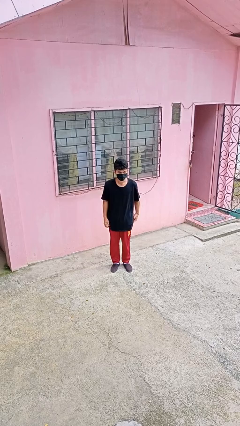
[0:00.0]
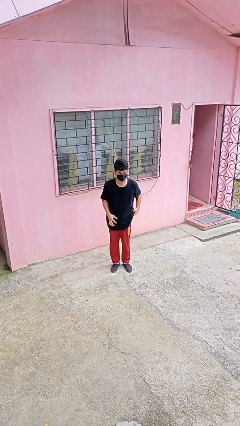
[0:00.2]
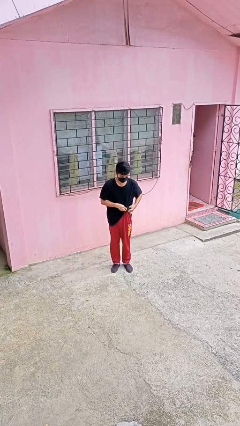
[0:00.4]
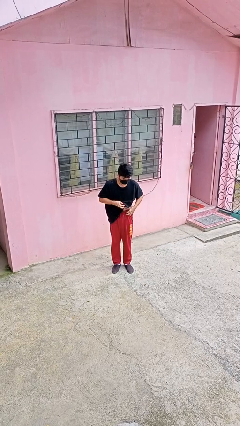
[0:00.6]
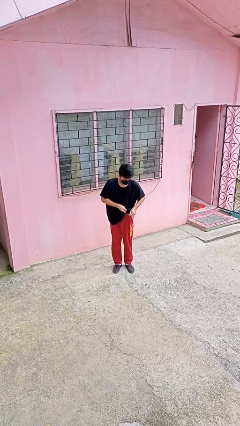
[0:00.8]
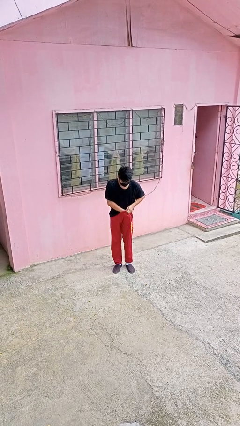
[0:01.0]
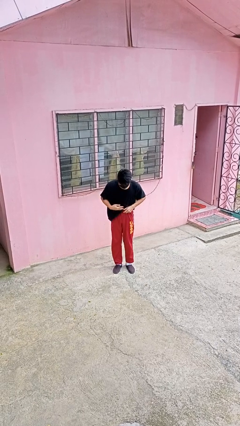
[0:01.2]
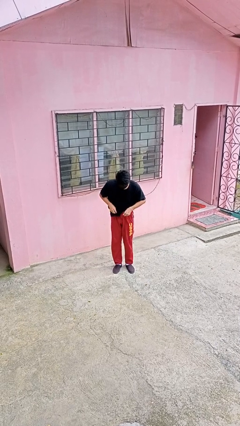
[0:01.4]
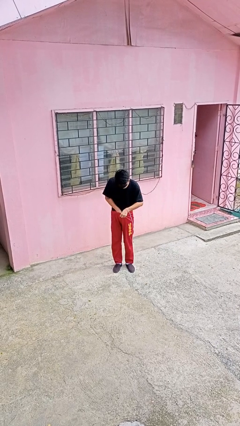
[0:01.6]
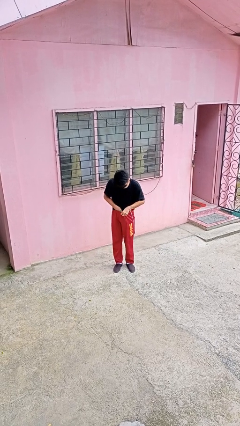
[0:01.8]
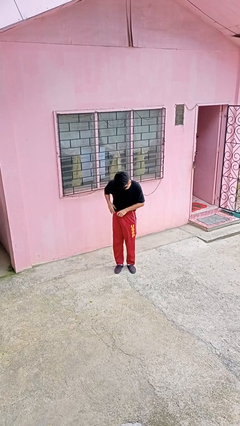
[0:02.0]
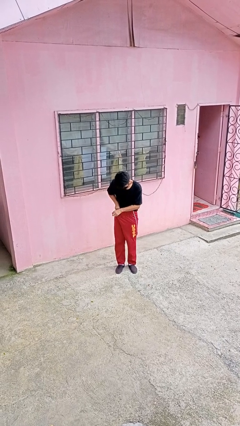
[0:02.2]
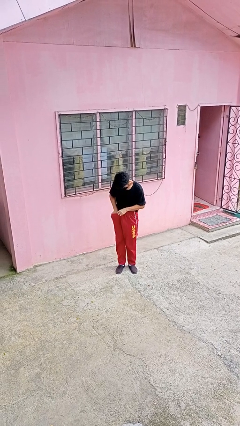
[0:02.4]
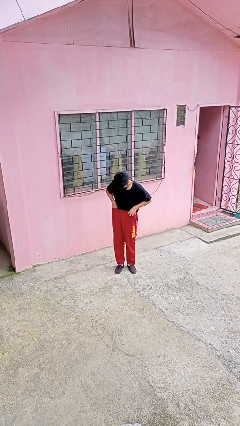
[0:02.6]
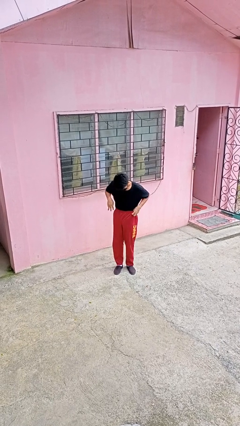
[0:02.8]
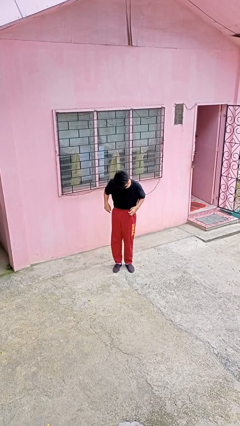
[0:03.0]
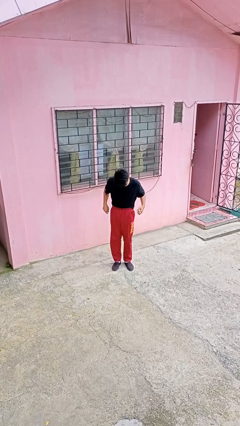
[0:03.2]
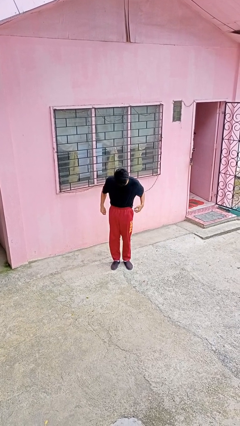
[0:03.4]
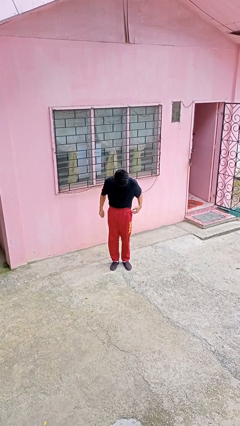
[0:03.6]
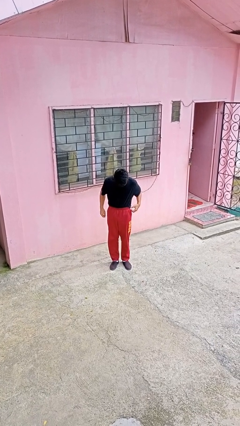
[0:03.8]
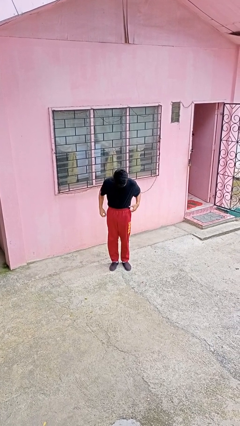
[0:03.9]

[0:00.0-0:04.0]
person tucks in shirt

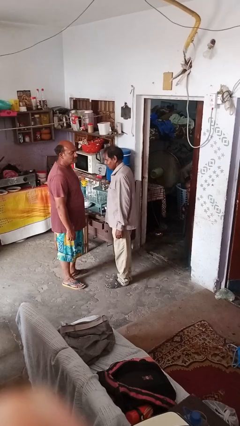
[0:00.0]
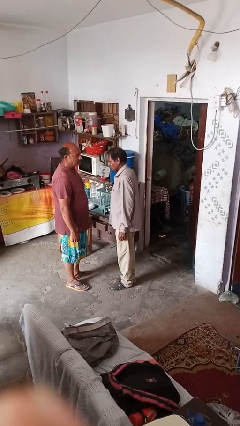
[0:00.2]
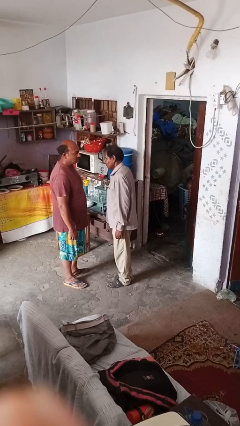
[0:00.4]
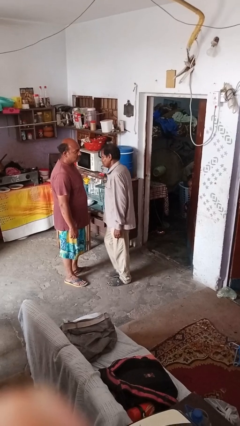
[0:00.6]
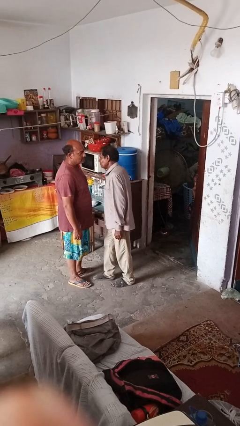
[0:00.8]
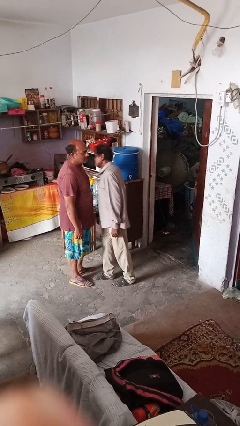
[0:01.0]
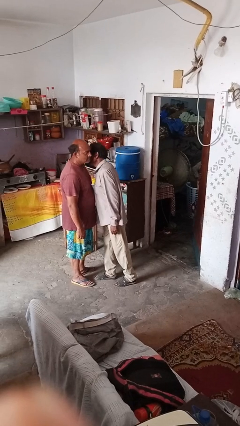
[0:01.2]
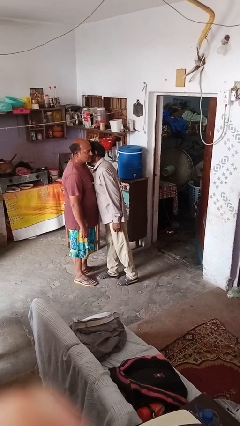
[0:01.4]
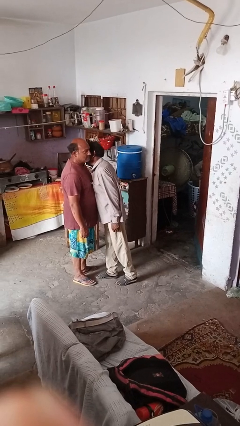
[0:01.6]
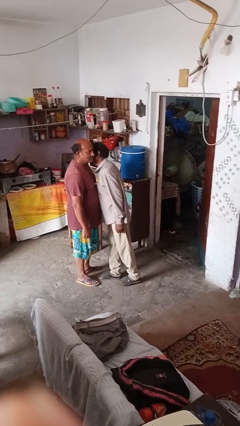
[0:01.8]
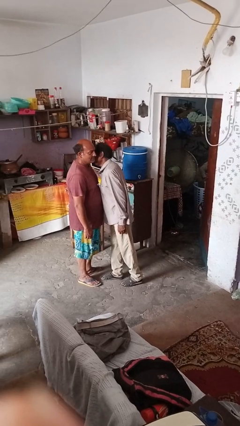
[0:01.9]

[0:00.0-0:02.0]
person kisses cheek of person

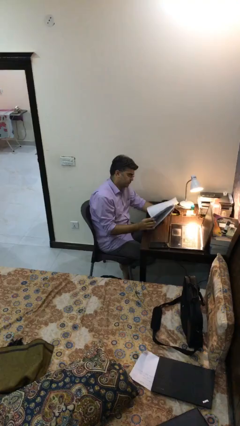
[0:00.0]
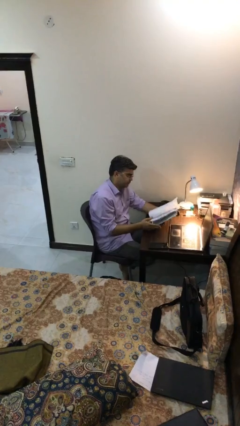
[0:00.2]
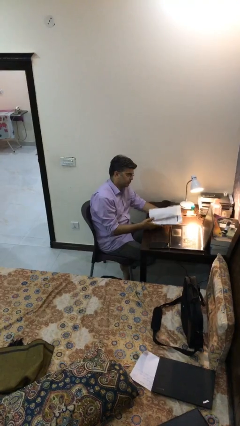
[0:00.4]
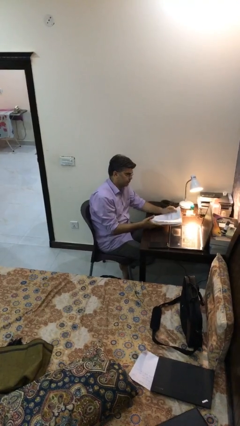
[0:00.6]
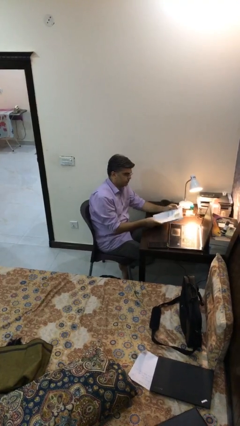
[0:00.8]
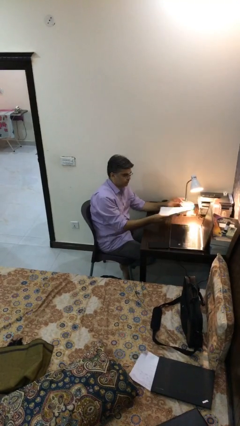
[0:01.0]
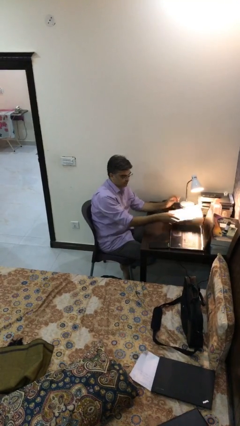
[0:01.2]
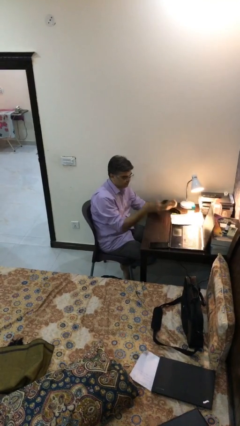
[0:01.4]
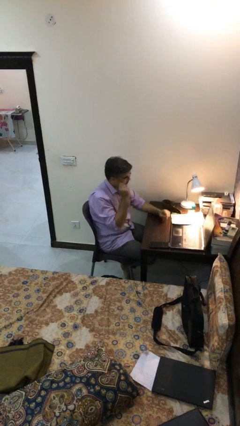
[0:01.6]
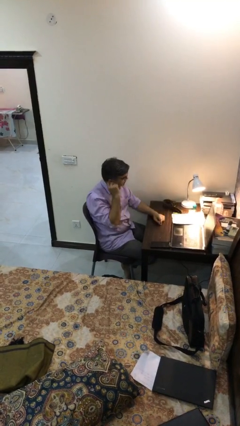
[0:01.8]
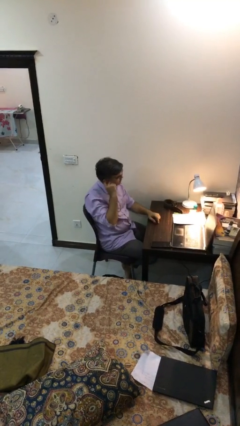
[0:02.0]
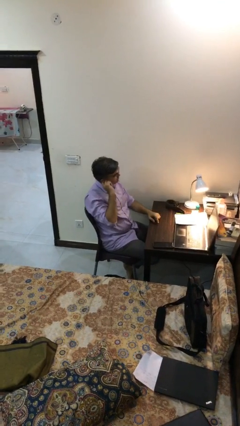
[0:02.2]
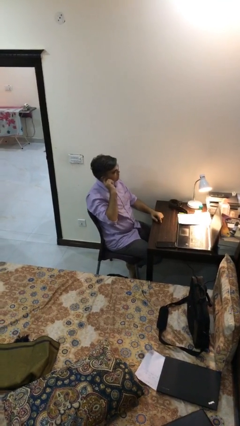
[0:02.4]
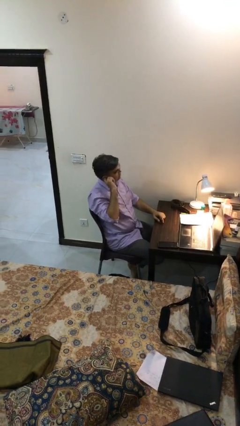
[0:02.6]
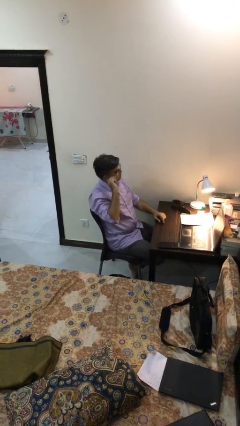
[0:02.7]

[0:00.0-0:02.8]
person puts down object on table

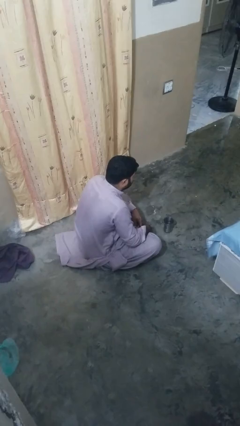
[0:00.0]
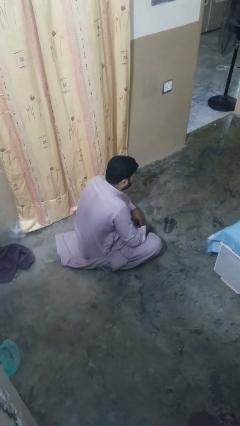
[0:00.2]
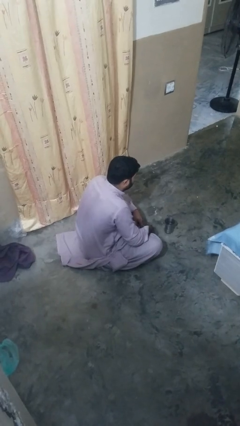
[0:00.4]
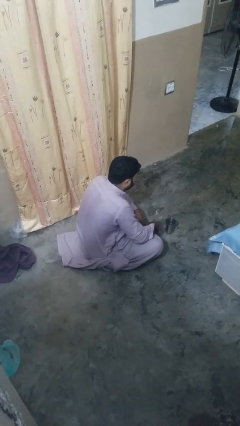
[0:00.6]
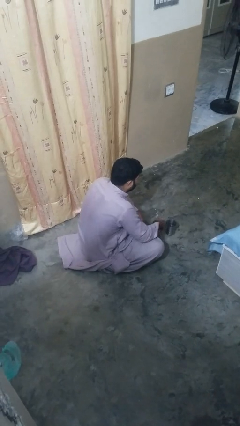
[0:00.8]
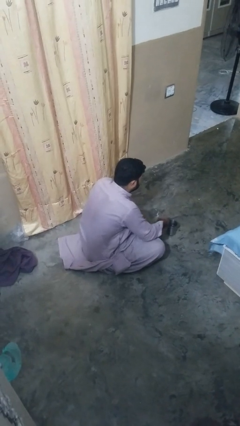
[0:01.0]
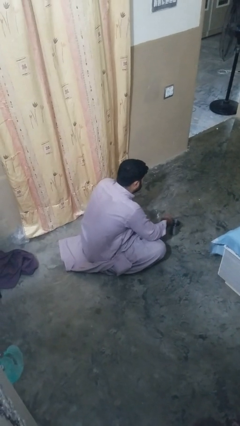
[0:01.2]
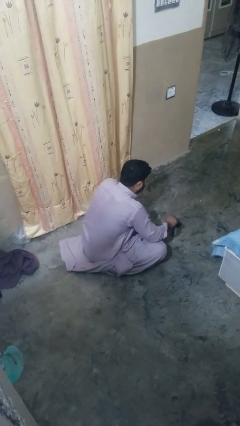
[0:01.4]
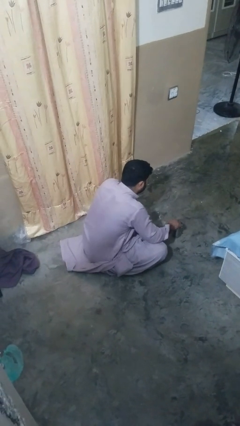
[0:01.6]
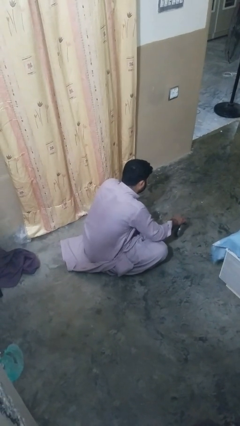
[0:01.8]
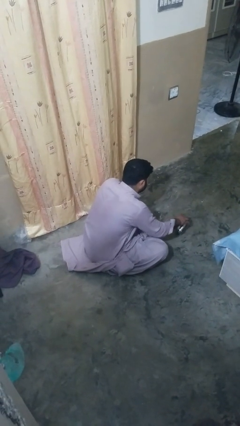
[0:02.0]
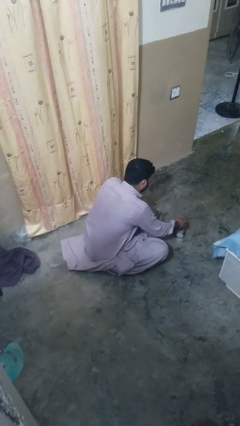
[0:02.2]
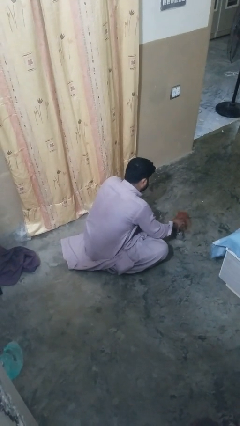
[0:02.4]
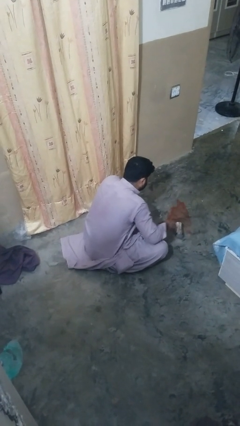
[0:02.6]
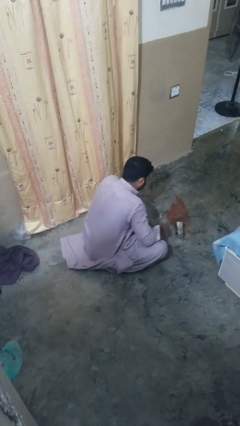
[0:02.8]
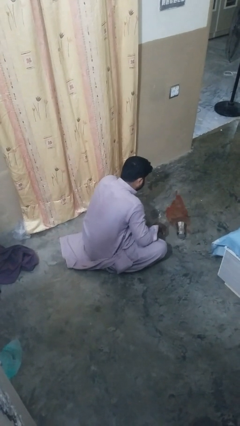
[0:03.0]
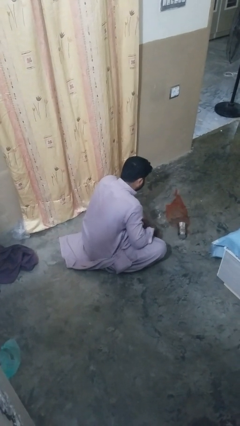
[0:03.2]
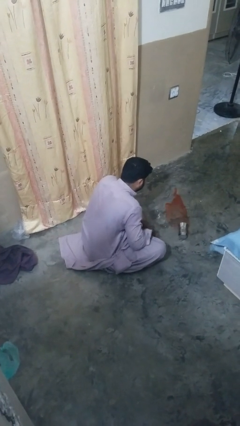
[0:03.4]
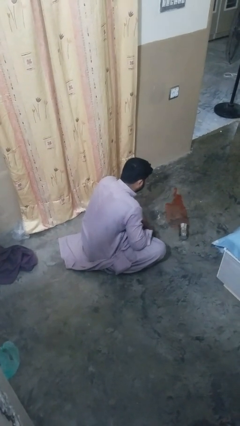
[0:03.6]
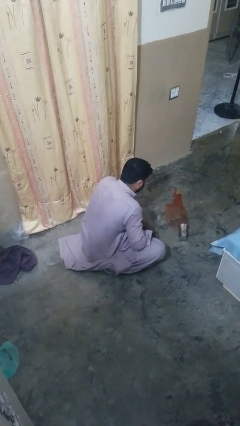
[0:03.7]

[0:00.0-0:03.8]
person spills on floor

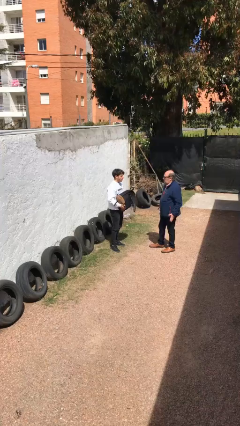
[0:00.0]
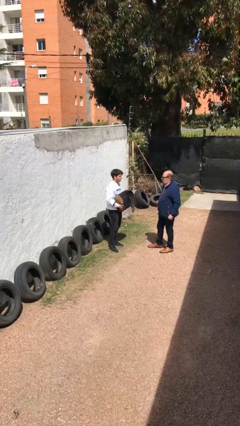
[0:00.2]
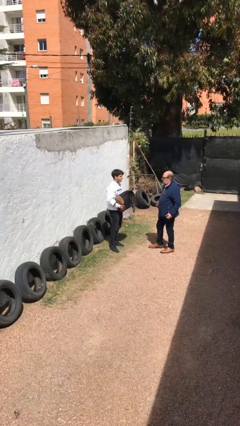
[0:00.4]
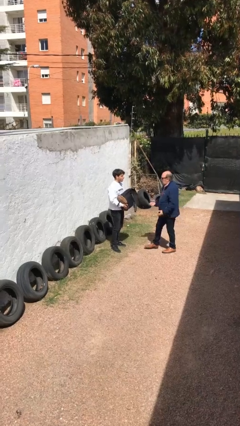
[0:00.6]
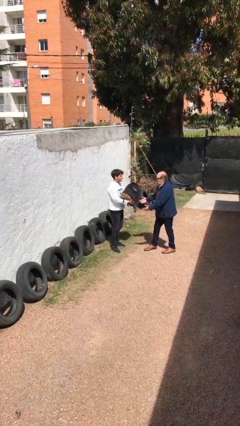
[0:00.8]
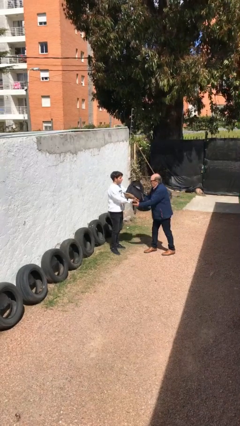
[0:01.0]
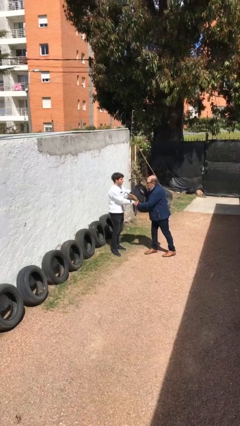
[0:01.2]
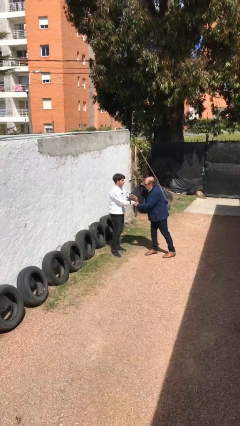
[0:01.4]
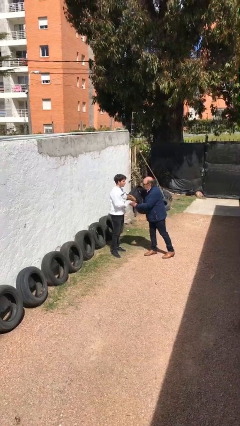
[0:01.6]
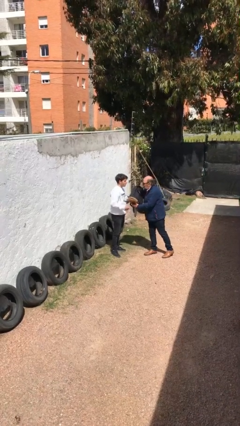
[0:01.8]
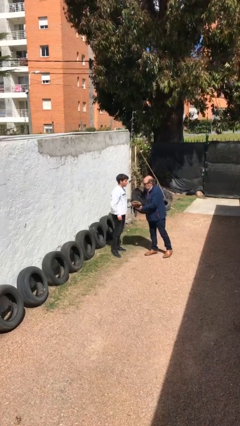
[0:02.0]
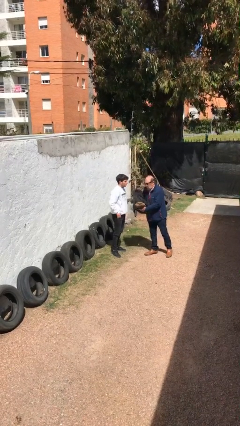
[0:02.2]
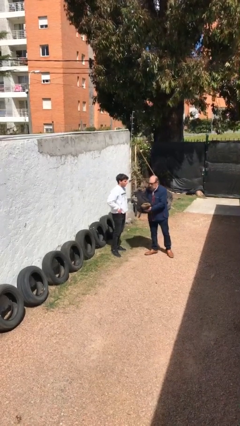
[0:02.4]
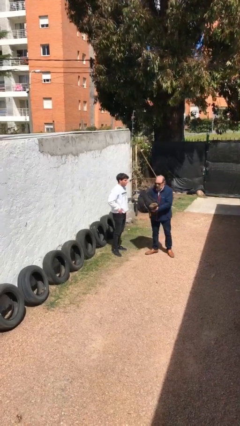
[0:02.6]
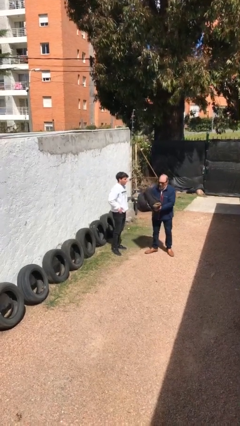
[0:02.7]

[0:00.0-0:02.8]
person transfers object to person

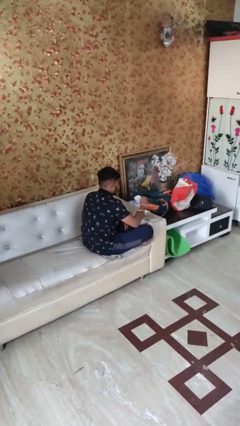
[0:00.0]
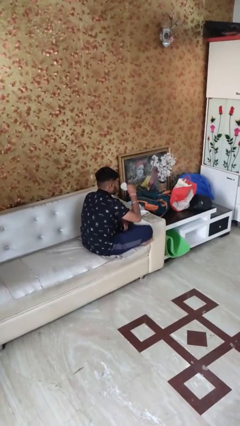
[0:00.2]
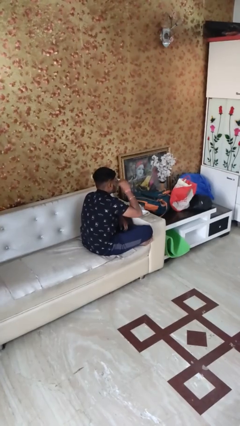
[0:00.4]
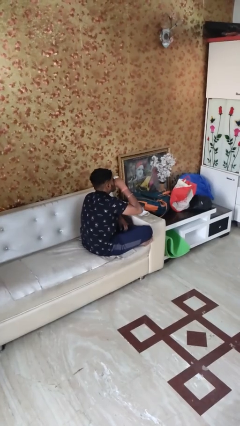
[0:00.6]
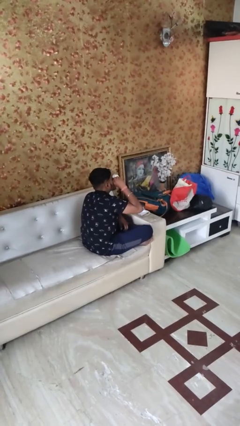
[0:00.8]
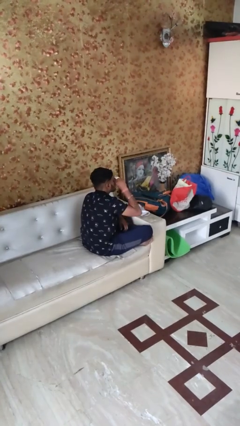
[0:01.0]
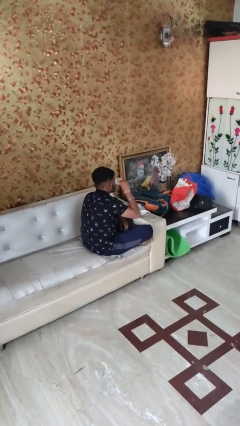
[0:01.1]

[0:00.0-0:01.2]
person drinks from mug

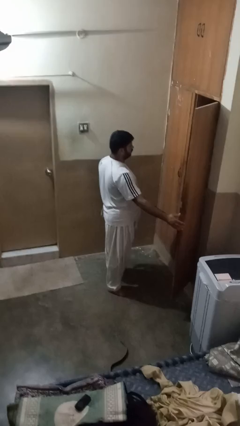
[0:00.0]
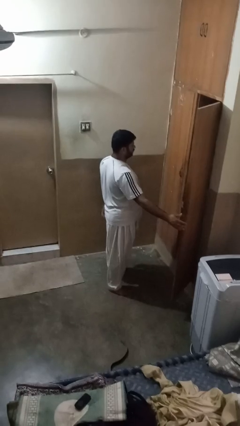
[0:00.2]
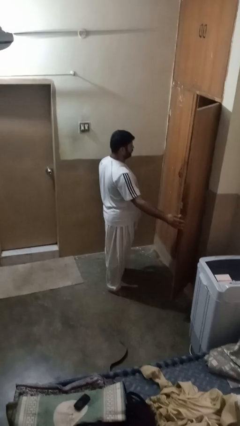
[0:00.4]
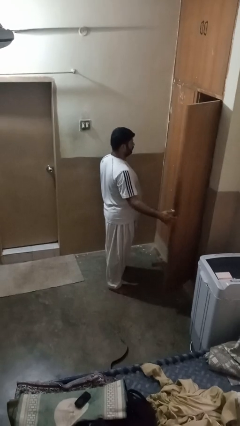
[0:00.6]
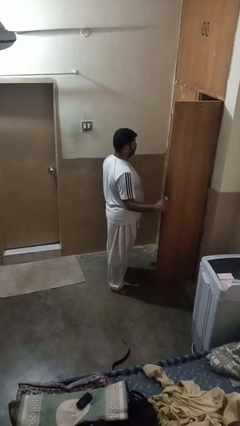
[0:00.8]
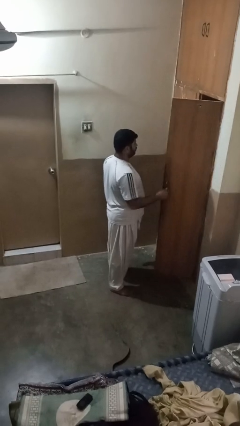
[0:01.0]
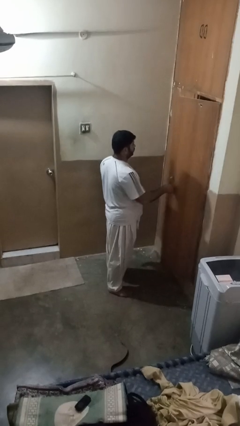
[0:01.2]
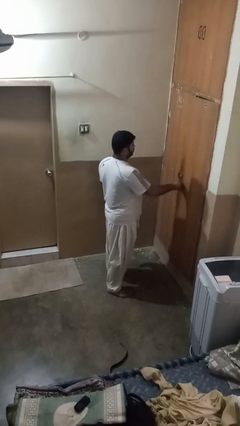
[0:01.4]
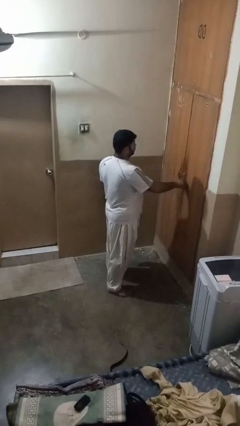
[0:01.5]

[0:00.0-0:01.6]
person closes closet door
